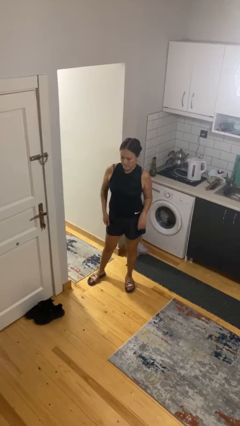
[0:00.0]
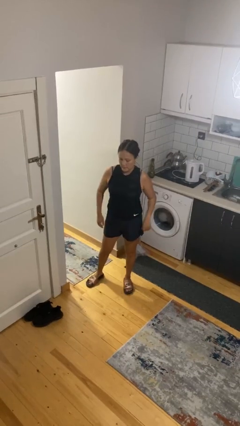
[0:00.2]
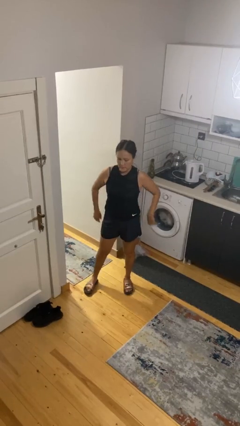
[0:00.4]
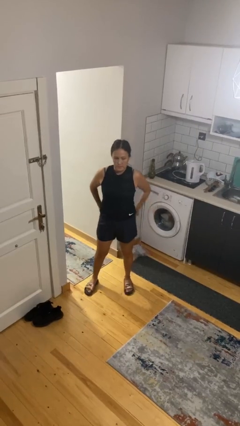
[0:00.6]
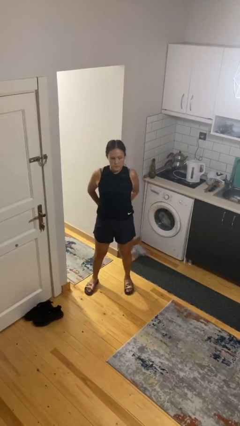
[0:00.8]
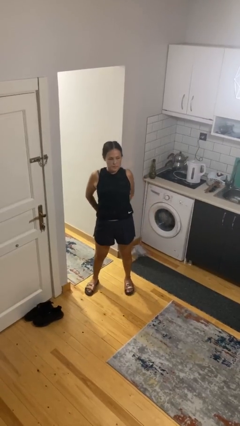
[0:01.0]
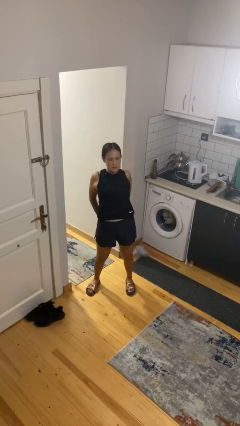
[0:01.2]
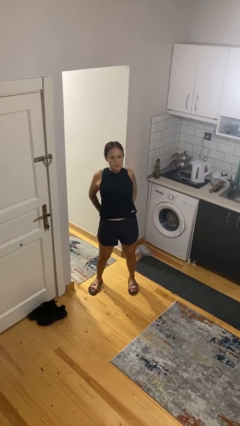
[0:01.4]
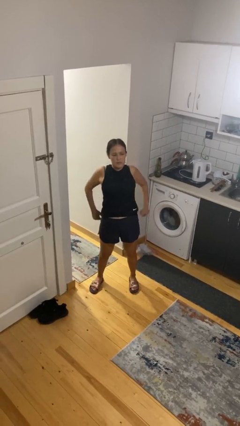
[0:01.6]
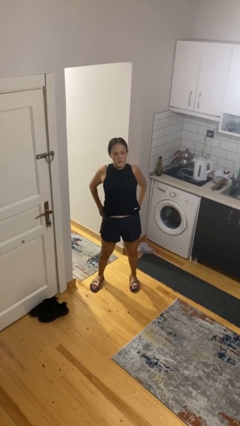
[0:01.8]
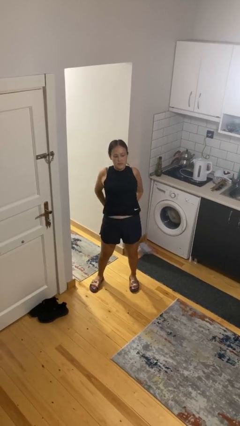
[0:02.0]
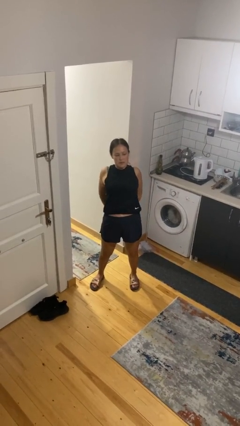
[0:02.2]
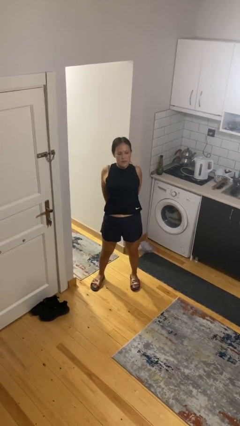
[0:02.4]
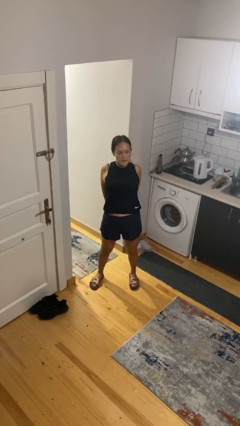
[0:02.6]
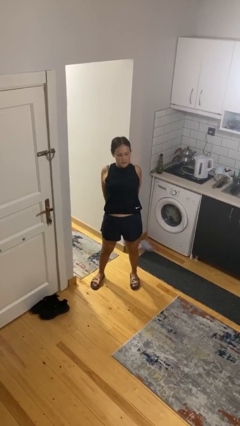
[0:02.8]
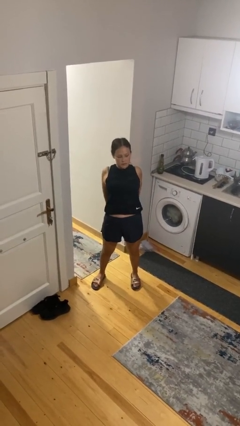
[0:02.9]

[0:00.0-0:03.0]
person stretches back

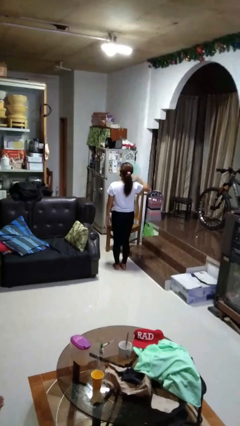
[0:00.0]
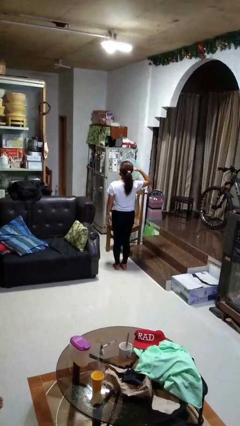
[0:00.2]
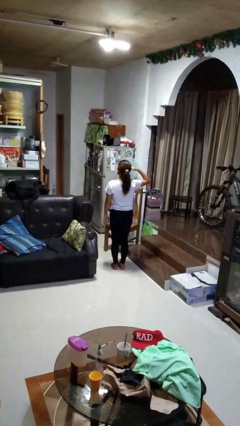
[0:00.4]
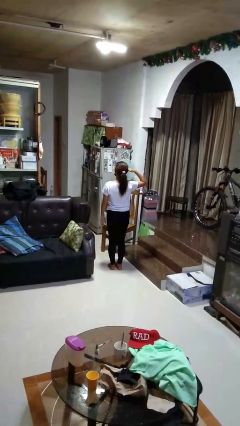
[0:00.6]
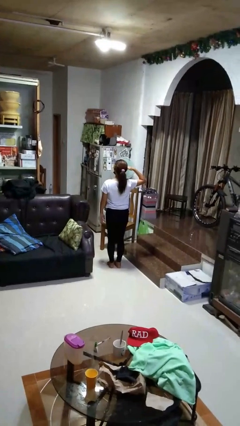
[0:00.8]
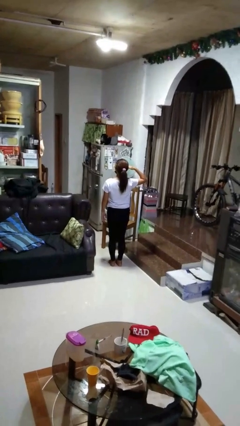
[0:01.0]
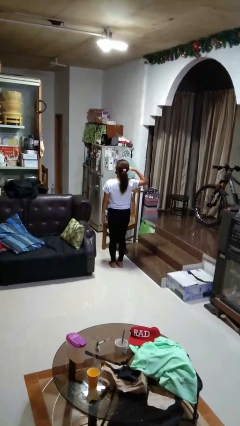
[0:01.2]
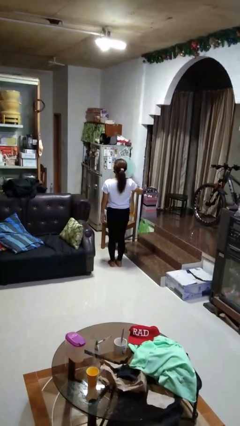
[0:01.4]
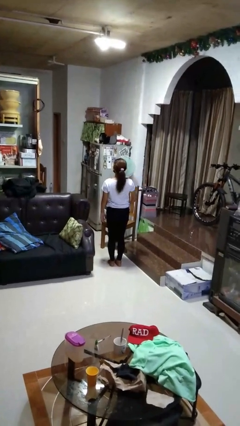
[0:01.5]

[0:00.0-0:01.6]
person salutes

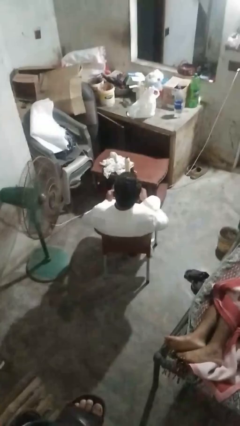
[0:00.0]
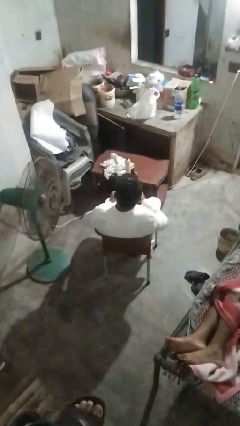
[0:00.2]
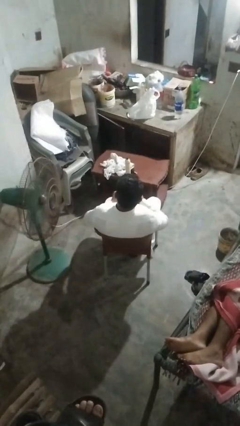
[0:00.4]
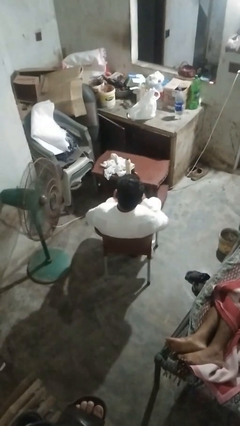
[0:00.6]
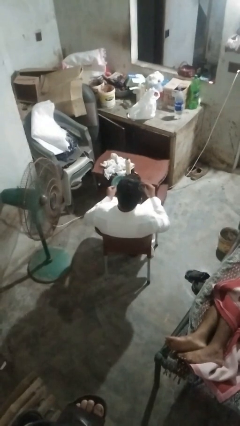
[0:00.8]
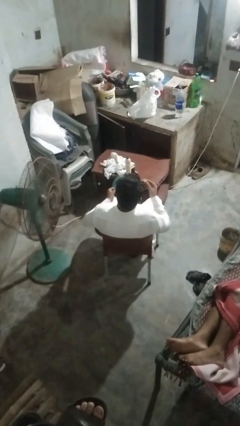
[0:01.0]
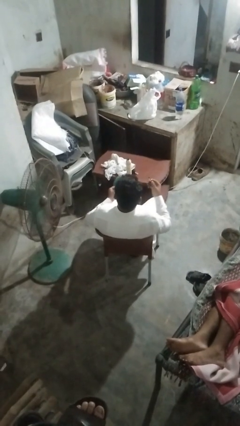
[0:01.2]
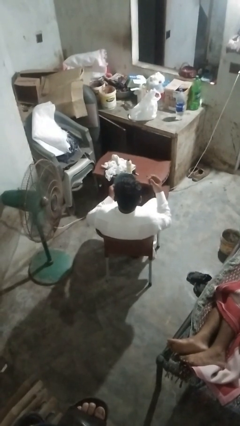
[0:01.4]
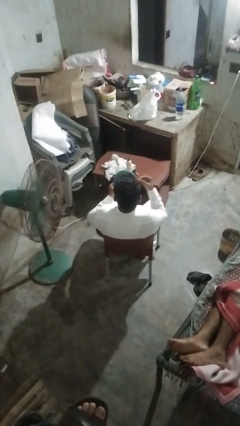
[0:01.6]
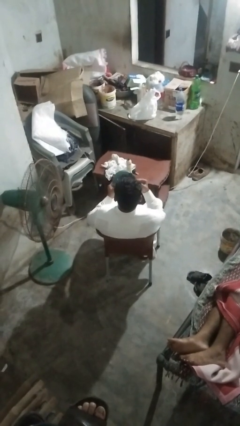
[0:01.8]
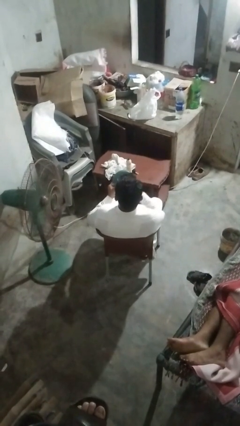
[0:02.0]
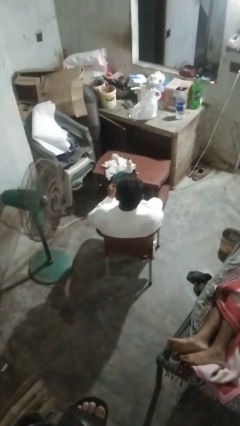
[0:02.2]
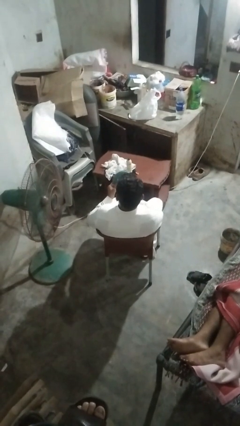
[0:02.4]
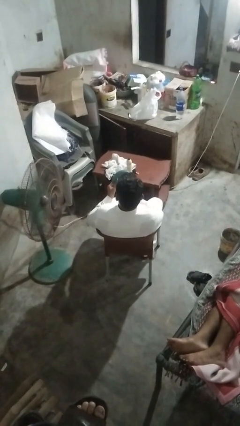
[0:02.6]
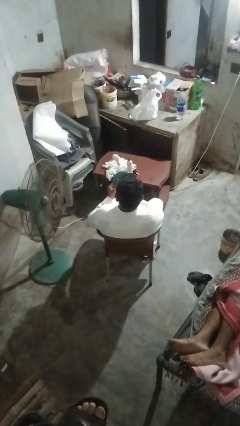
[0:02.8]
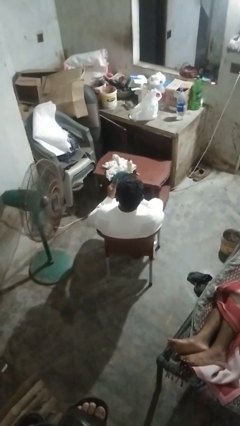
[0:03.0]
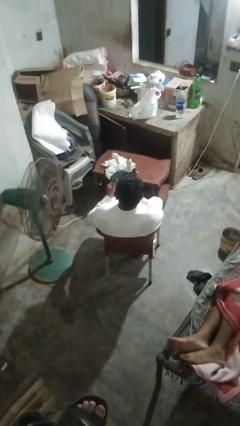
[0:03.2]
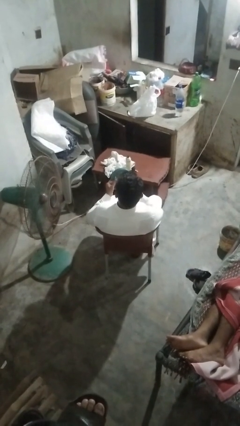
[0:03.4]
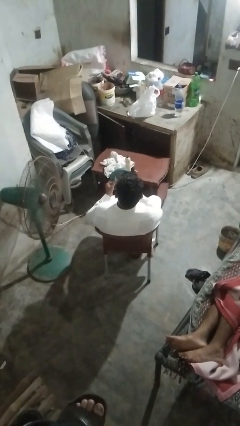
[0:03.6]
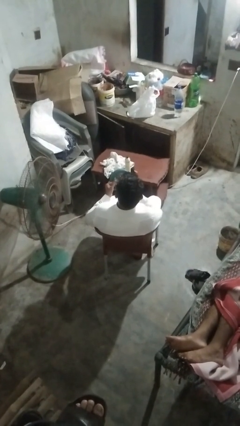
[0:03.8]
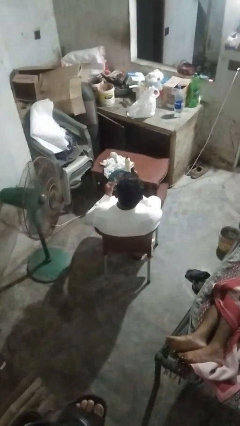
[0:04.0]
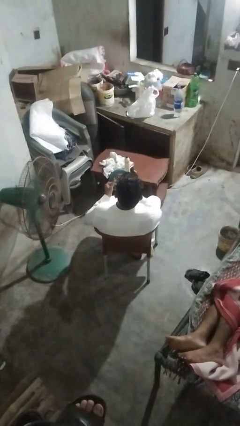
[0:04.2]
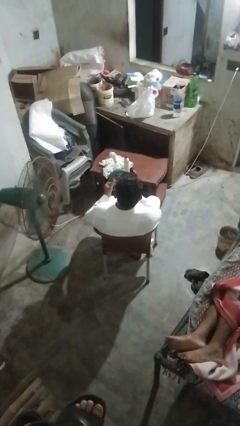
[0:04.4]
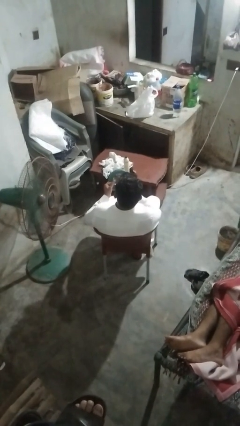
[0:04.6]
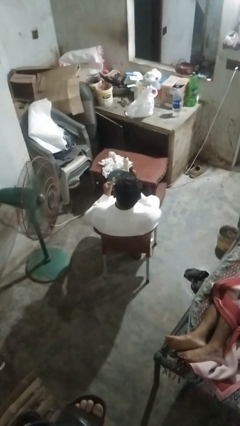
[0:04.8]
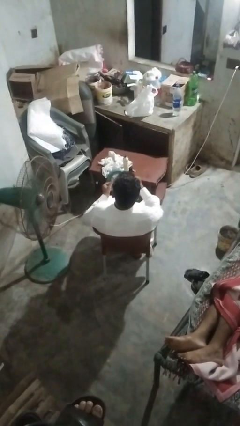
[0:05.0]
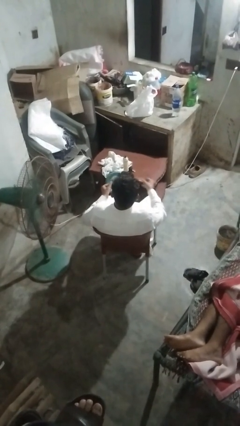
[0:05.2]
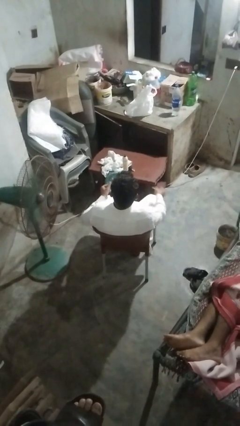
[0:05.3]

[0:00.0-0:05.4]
person applies lip makeup

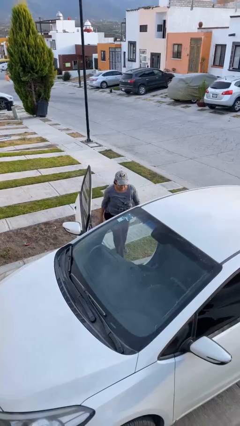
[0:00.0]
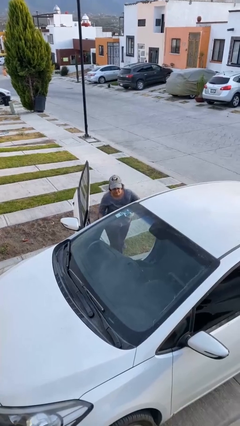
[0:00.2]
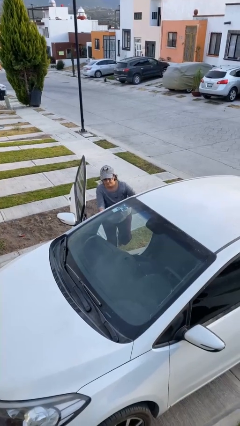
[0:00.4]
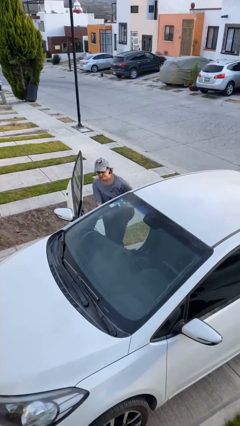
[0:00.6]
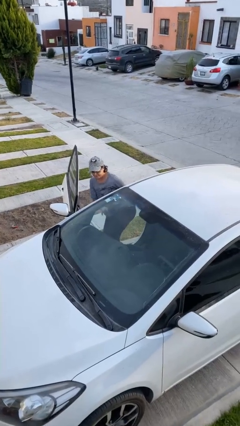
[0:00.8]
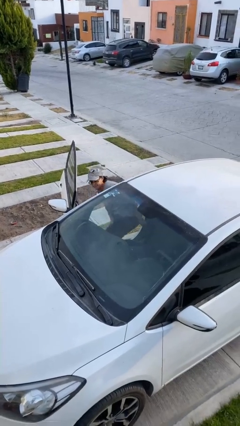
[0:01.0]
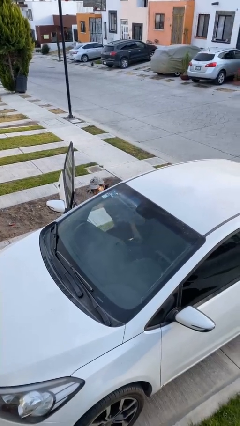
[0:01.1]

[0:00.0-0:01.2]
person enters car

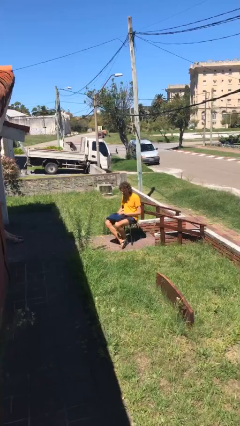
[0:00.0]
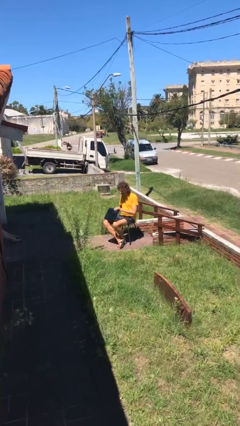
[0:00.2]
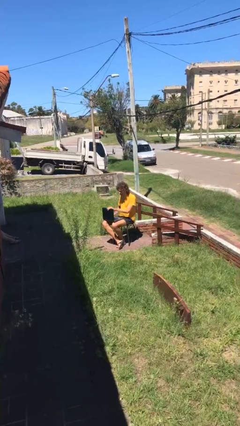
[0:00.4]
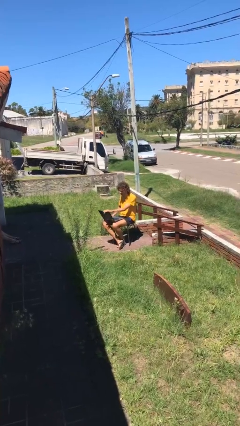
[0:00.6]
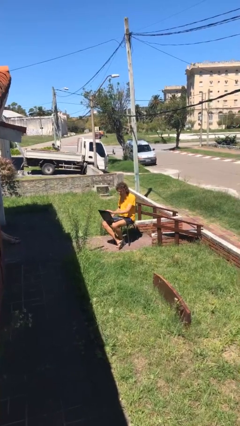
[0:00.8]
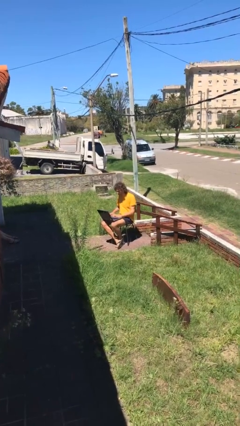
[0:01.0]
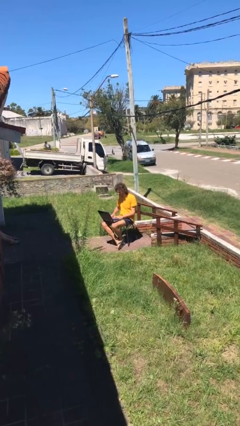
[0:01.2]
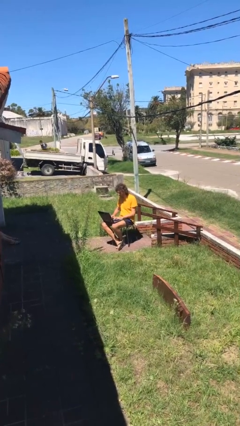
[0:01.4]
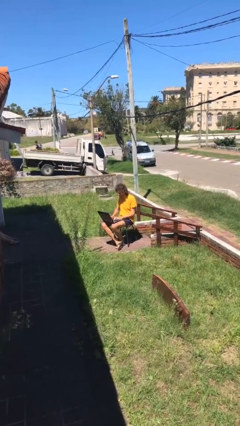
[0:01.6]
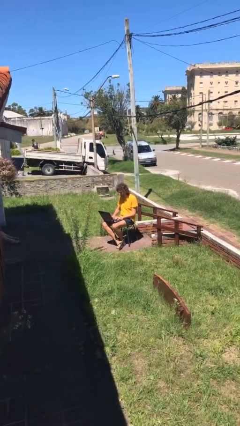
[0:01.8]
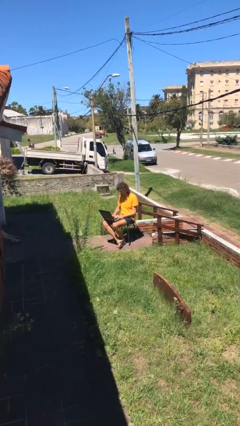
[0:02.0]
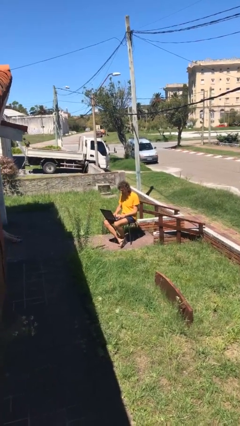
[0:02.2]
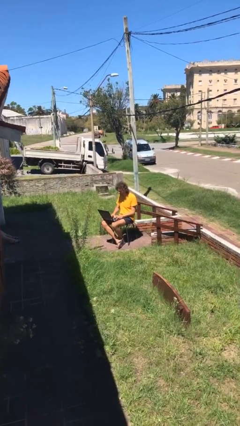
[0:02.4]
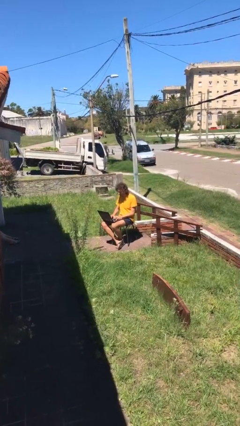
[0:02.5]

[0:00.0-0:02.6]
person interacts with laptop

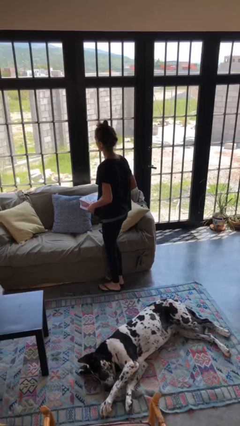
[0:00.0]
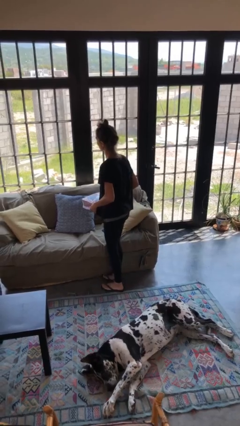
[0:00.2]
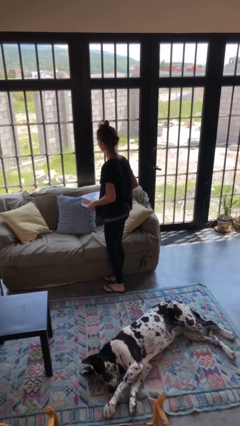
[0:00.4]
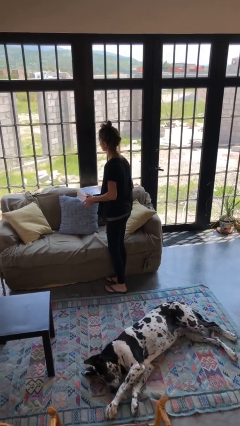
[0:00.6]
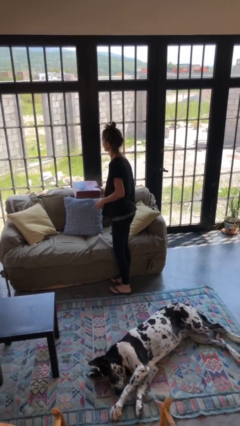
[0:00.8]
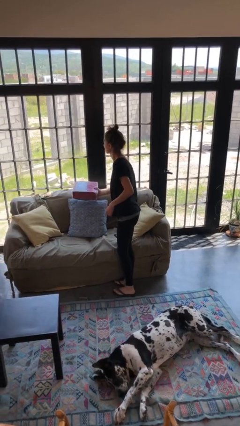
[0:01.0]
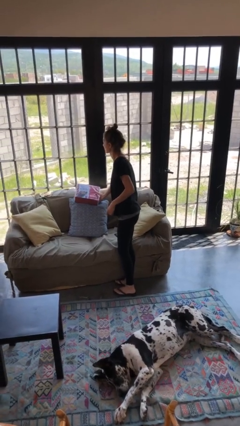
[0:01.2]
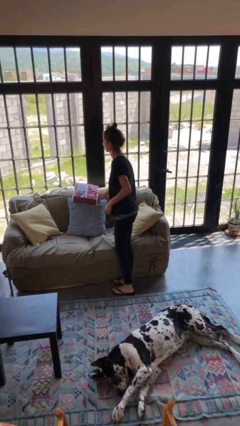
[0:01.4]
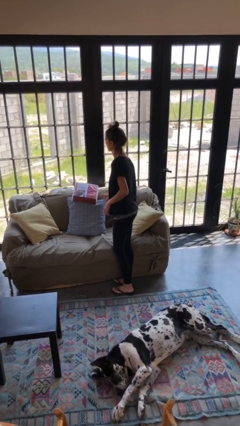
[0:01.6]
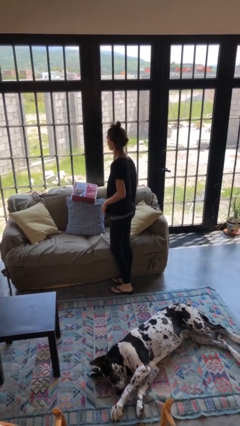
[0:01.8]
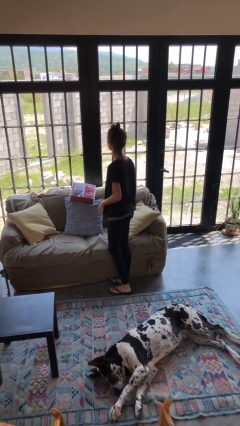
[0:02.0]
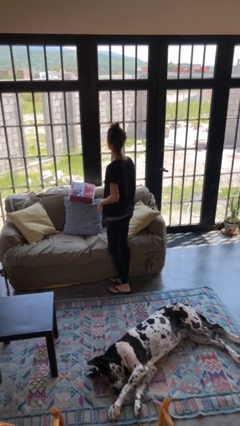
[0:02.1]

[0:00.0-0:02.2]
person puts down object on couch

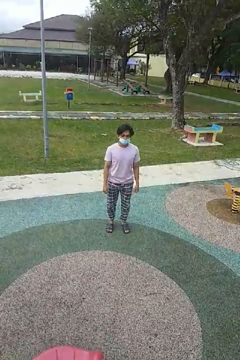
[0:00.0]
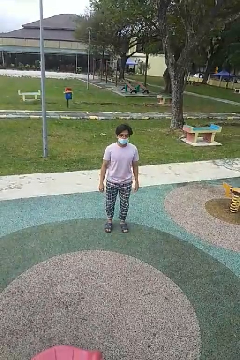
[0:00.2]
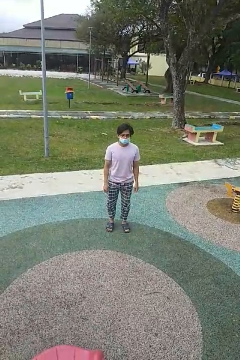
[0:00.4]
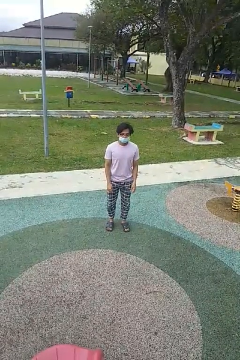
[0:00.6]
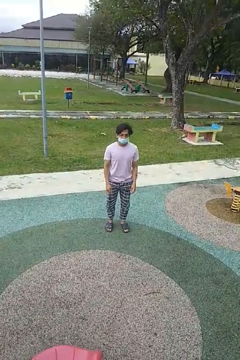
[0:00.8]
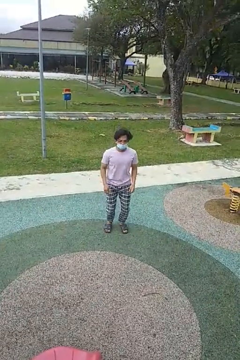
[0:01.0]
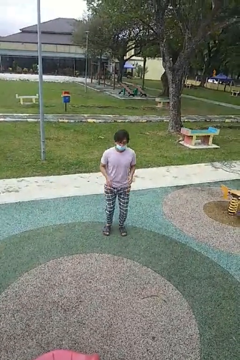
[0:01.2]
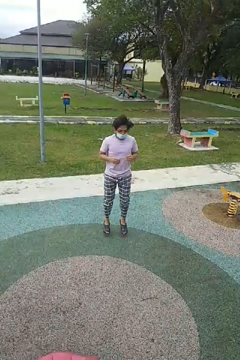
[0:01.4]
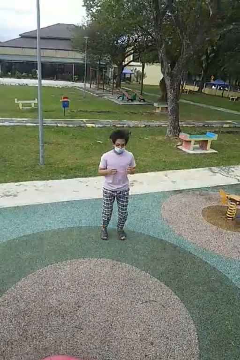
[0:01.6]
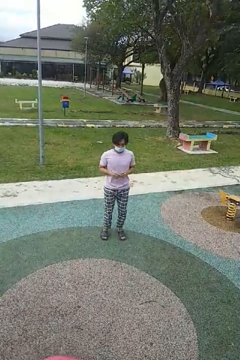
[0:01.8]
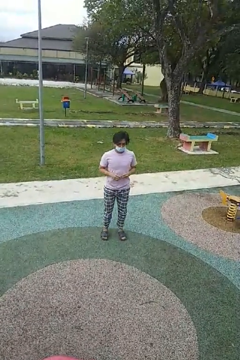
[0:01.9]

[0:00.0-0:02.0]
person jumps
